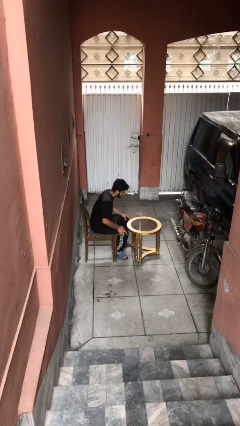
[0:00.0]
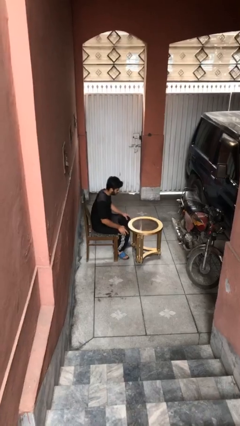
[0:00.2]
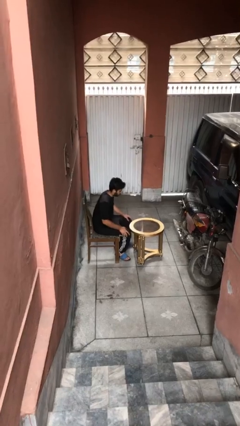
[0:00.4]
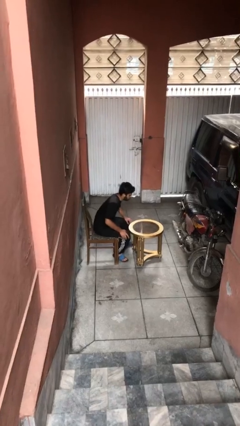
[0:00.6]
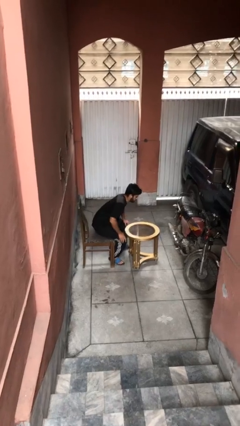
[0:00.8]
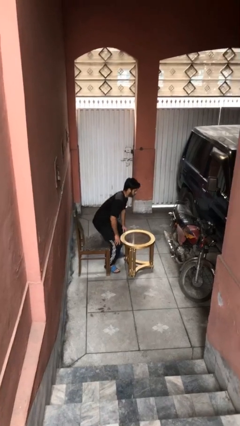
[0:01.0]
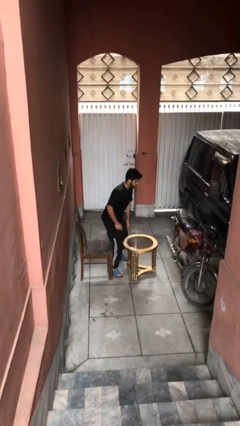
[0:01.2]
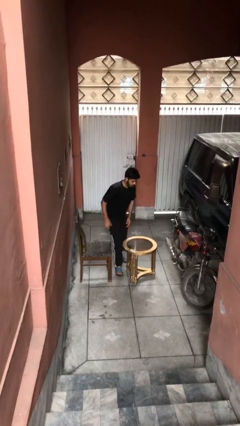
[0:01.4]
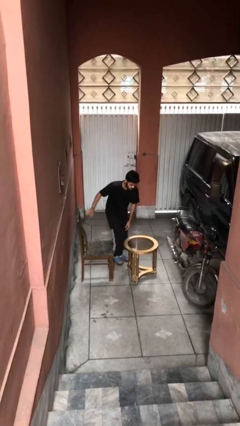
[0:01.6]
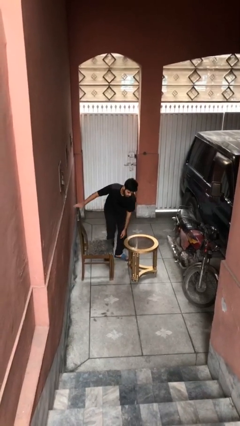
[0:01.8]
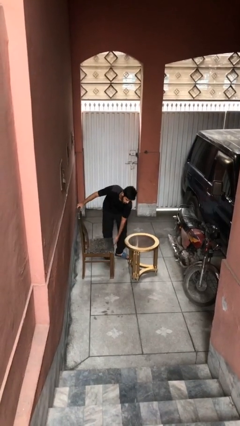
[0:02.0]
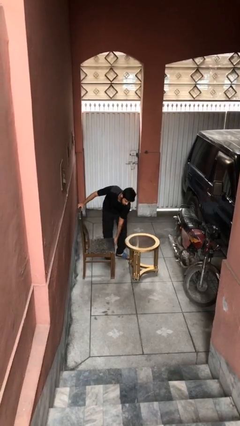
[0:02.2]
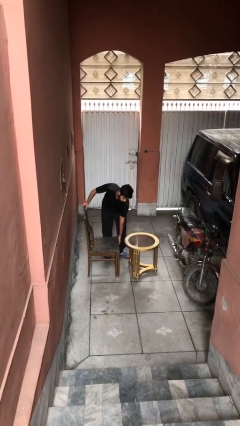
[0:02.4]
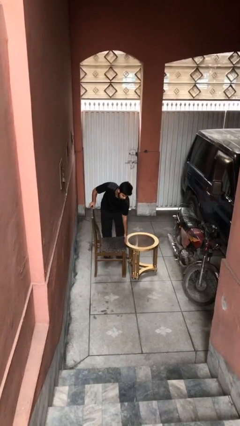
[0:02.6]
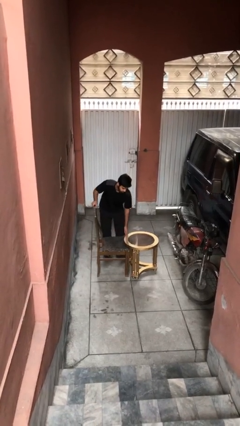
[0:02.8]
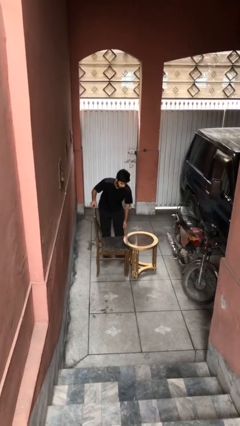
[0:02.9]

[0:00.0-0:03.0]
person stands up

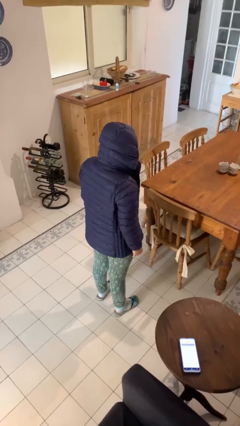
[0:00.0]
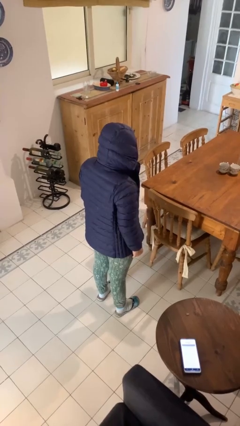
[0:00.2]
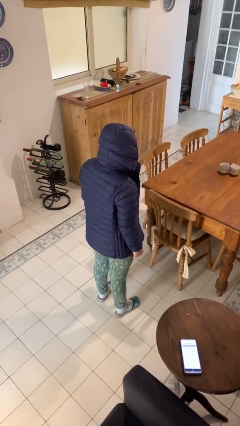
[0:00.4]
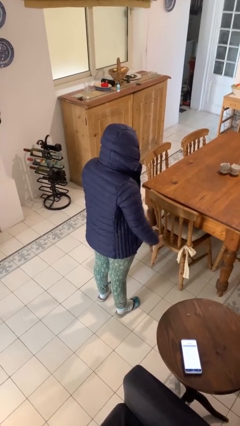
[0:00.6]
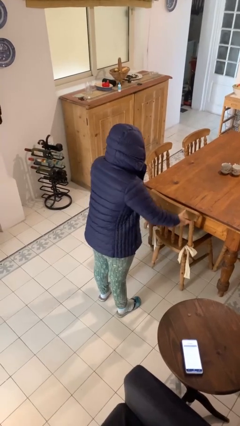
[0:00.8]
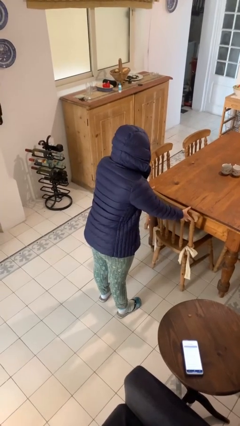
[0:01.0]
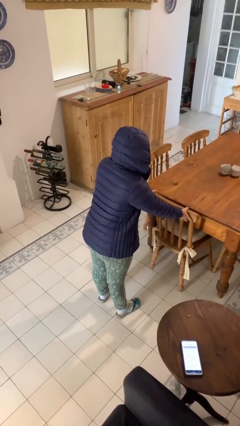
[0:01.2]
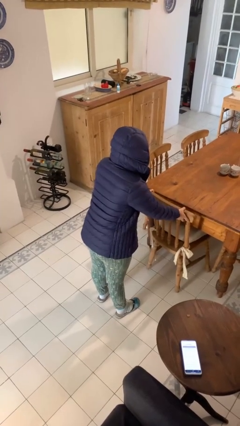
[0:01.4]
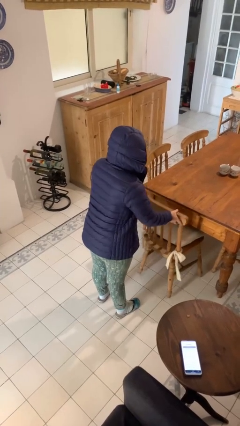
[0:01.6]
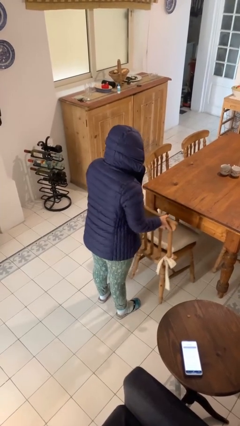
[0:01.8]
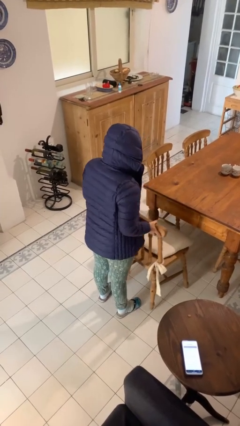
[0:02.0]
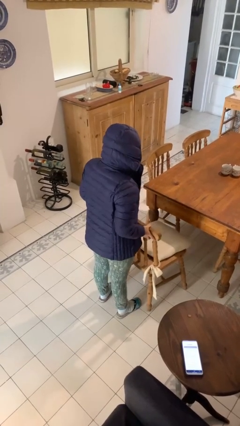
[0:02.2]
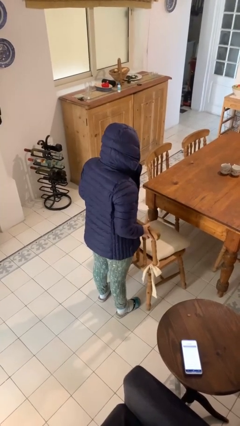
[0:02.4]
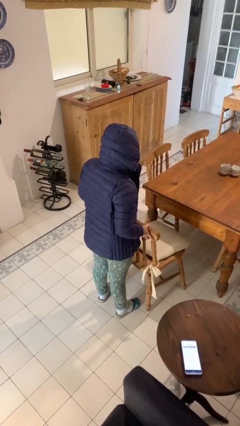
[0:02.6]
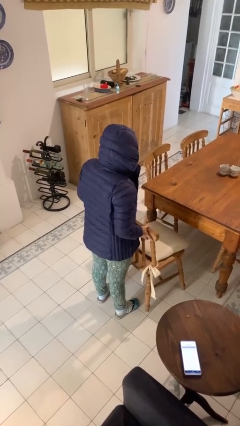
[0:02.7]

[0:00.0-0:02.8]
person pulls out chair

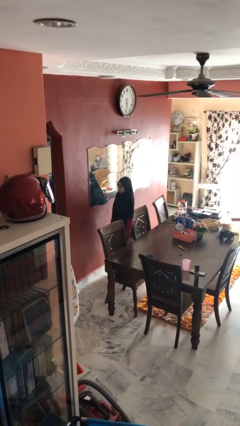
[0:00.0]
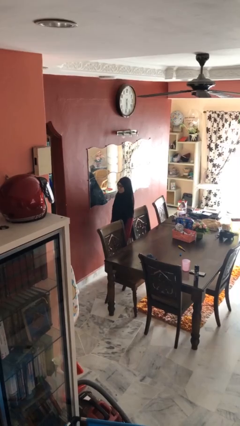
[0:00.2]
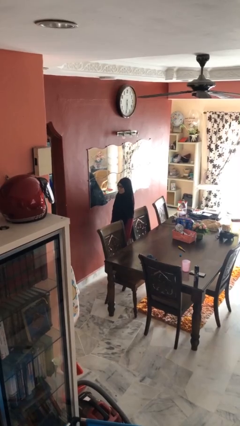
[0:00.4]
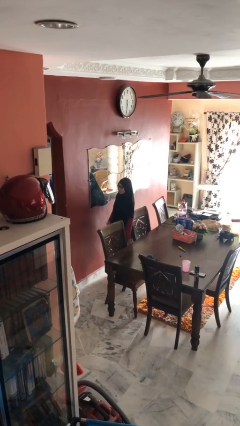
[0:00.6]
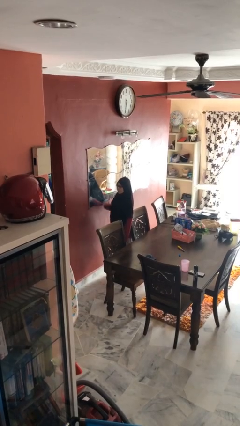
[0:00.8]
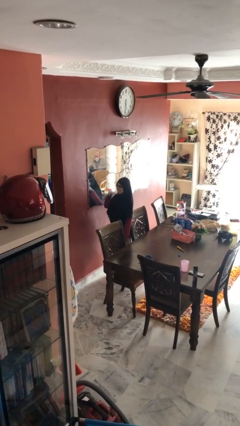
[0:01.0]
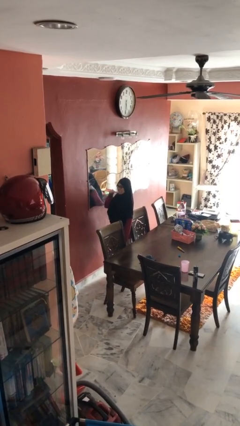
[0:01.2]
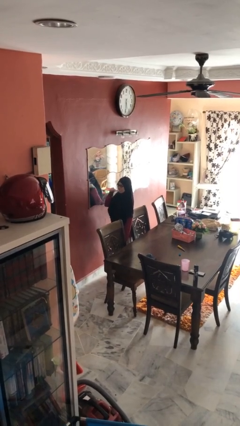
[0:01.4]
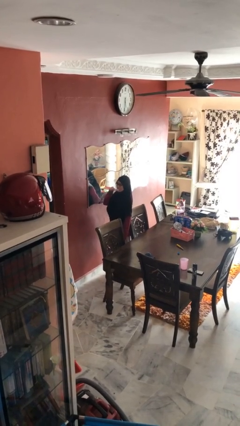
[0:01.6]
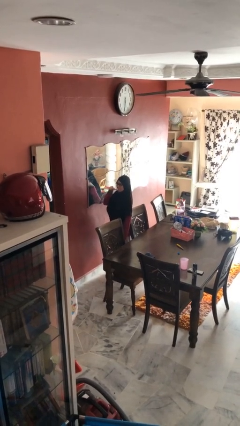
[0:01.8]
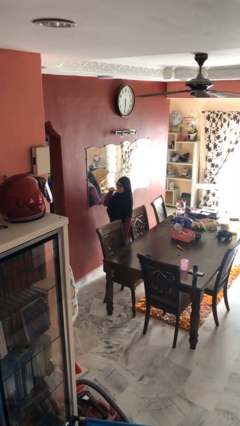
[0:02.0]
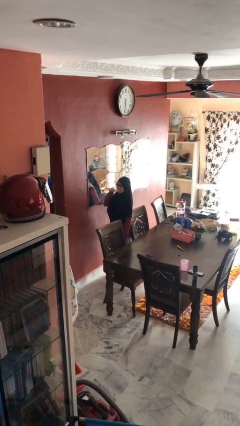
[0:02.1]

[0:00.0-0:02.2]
person brushes teeth

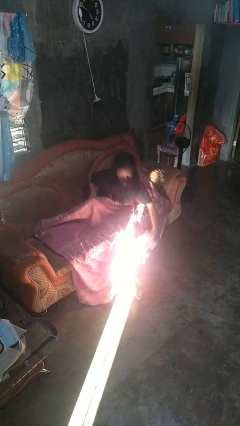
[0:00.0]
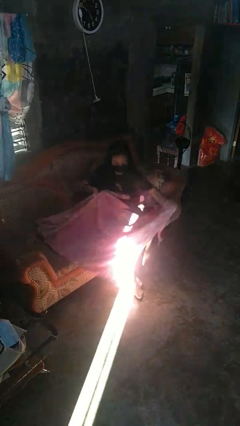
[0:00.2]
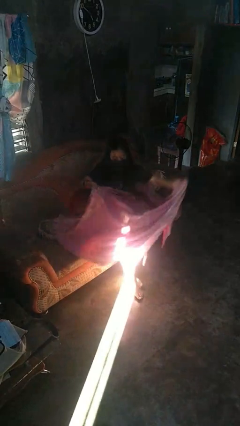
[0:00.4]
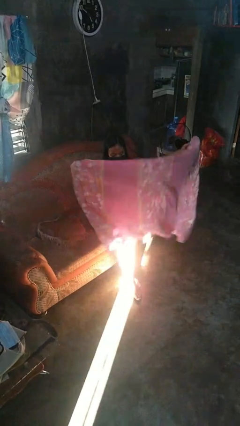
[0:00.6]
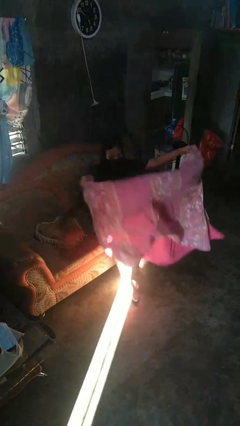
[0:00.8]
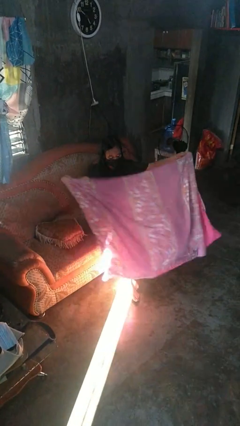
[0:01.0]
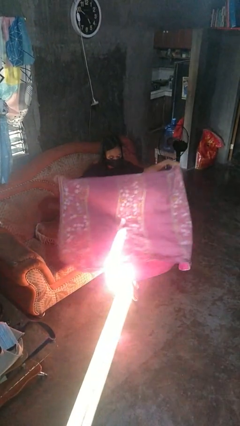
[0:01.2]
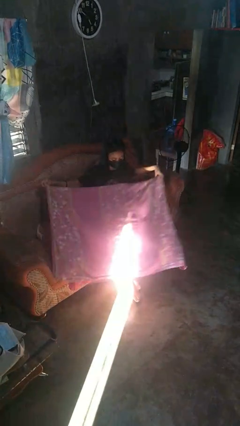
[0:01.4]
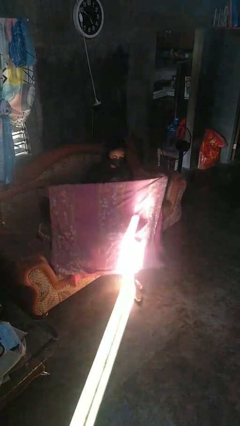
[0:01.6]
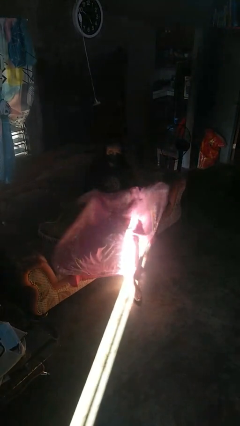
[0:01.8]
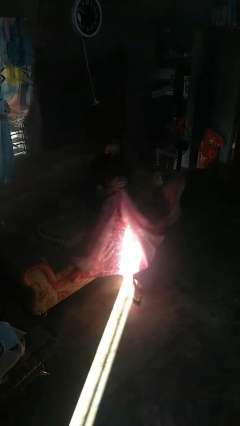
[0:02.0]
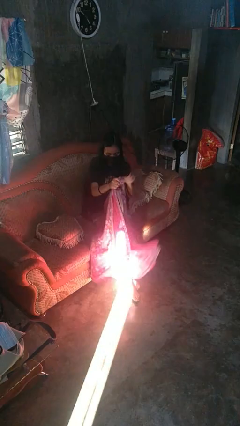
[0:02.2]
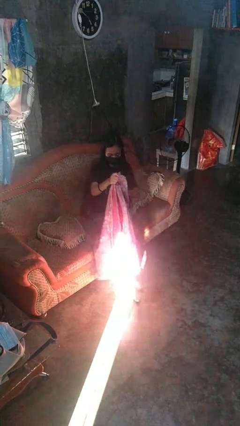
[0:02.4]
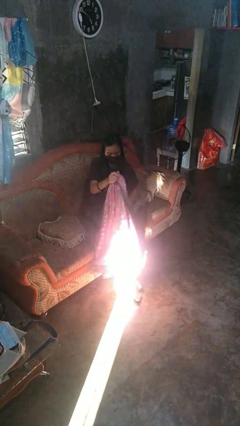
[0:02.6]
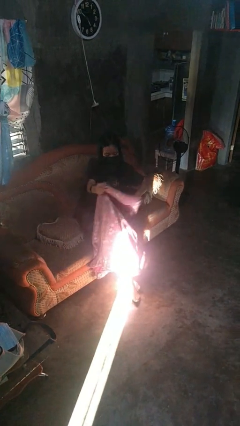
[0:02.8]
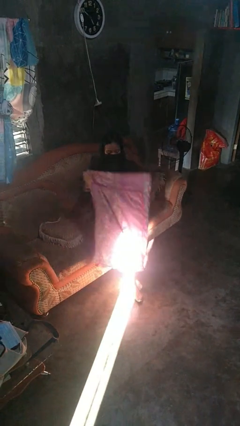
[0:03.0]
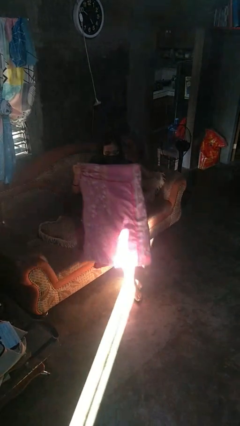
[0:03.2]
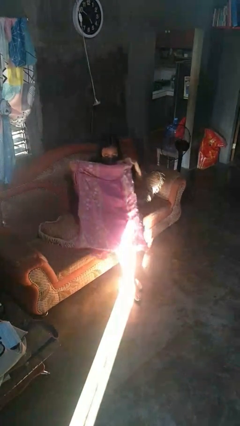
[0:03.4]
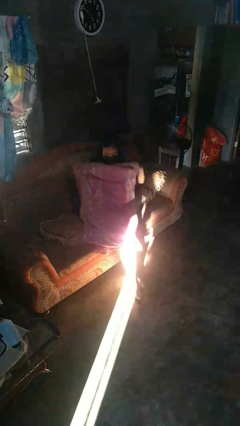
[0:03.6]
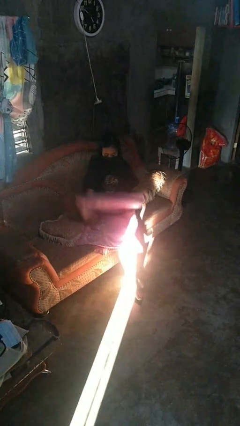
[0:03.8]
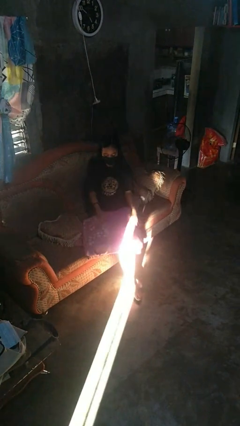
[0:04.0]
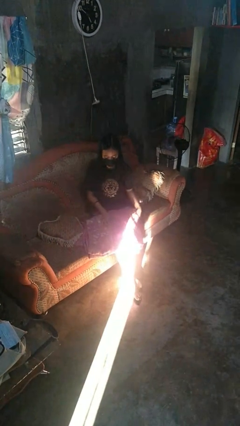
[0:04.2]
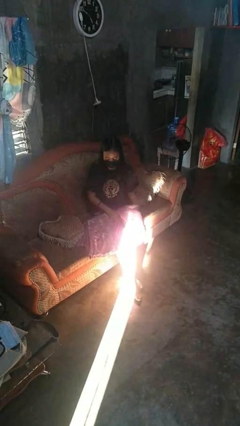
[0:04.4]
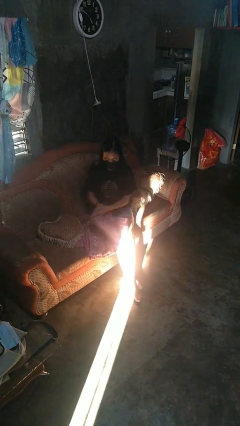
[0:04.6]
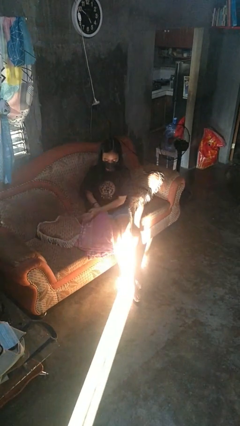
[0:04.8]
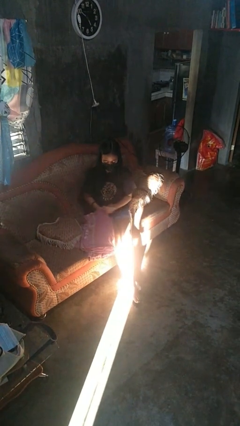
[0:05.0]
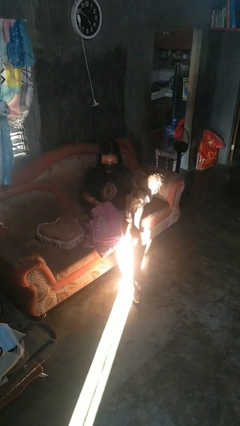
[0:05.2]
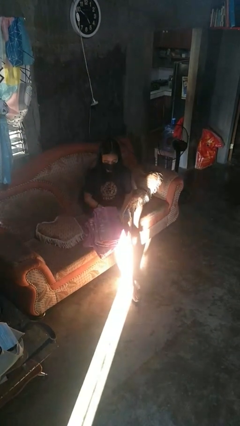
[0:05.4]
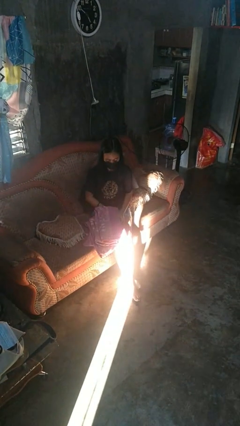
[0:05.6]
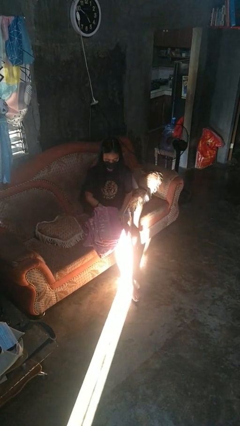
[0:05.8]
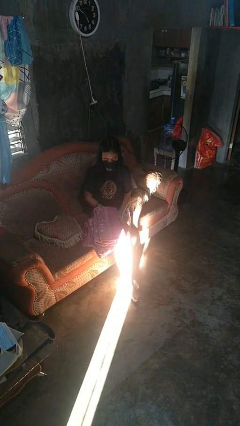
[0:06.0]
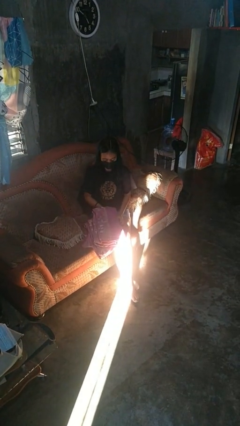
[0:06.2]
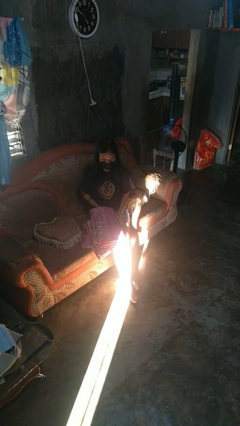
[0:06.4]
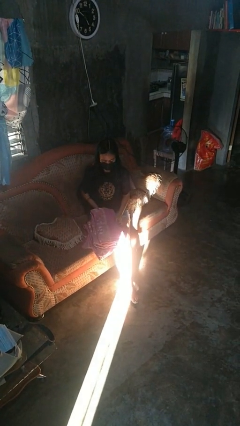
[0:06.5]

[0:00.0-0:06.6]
person folds blanket

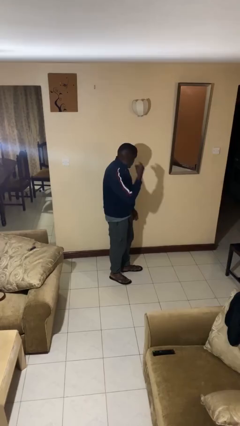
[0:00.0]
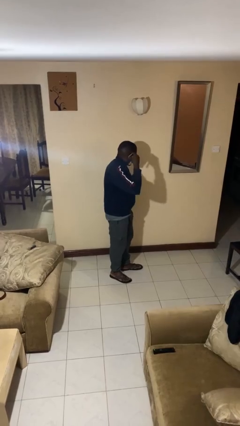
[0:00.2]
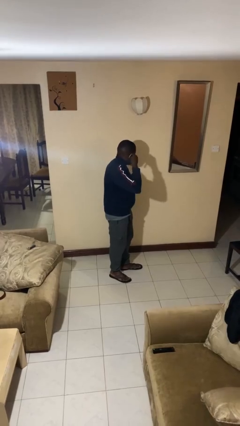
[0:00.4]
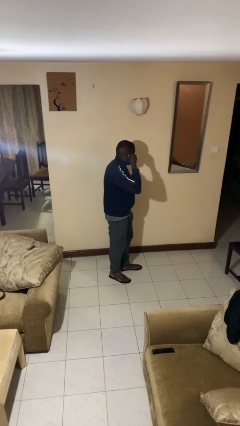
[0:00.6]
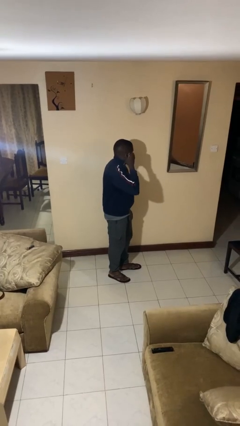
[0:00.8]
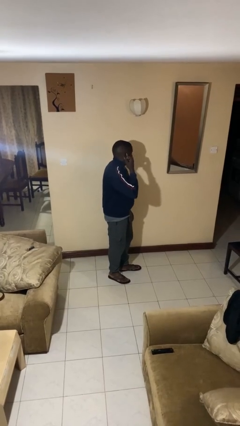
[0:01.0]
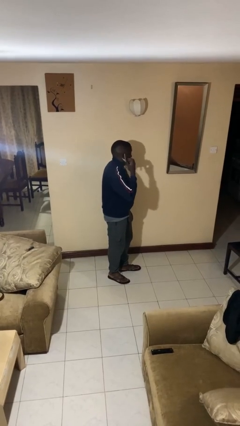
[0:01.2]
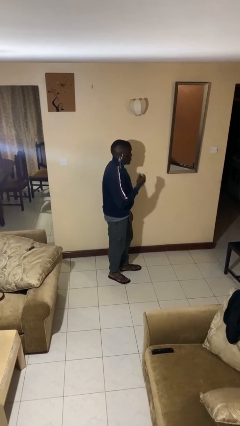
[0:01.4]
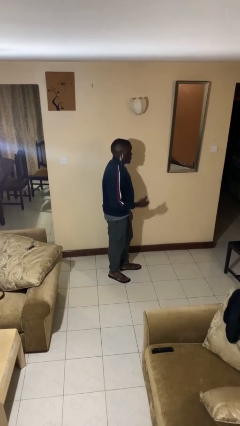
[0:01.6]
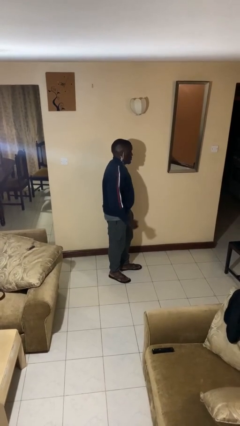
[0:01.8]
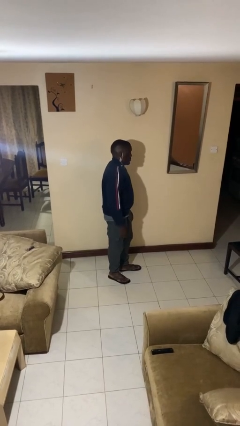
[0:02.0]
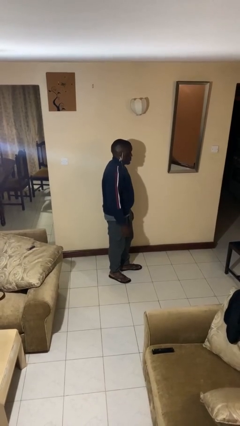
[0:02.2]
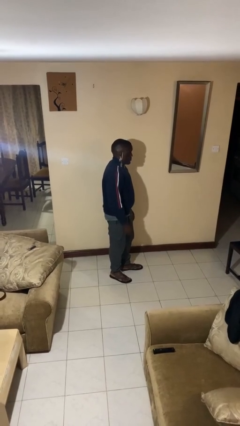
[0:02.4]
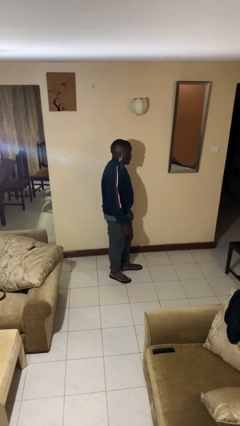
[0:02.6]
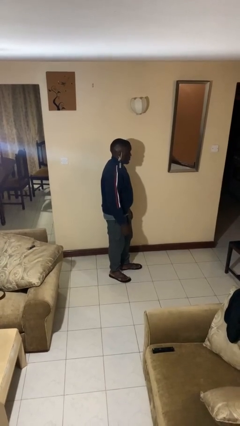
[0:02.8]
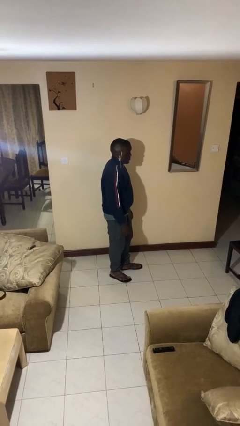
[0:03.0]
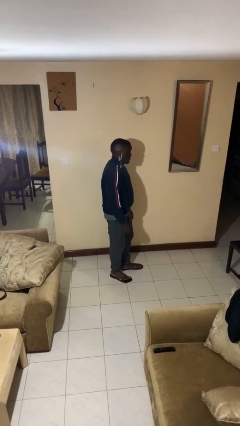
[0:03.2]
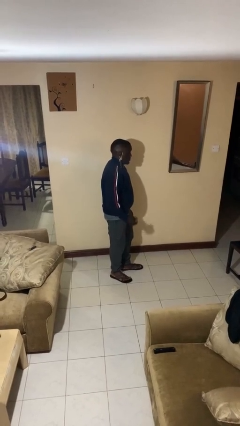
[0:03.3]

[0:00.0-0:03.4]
person puts on earrings
